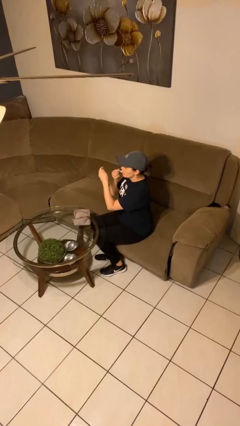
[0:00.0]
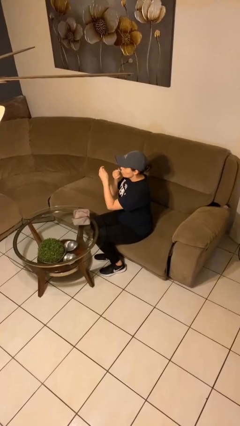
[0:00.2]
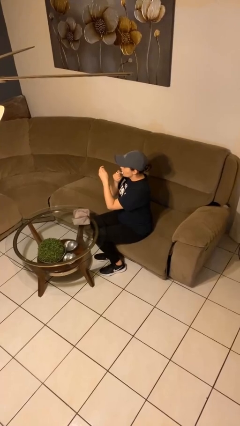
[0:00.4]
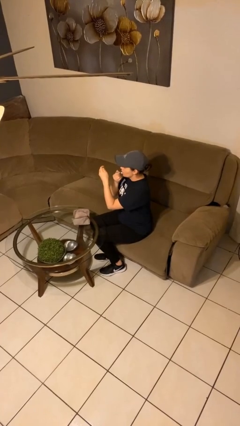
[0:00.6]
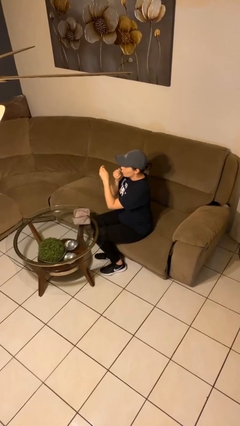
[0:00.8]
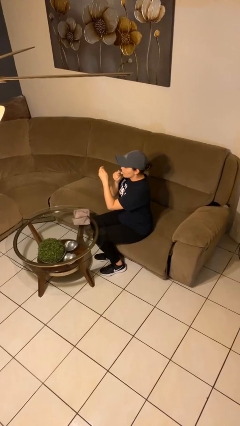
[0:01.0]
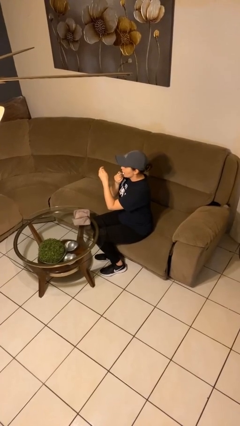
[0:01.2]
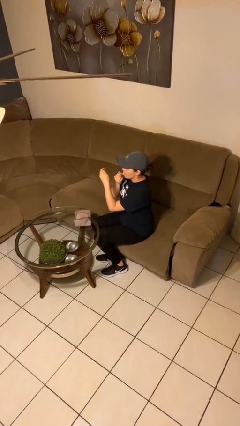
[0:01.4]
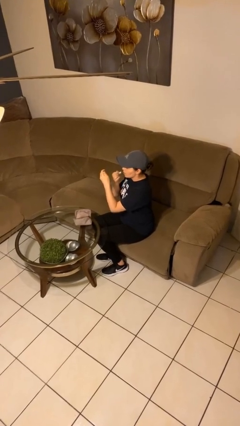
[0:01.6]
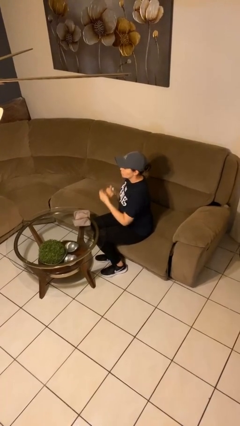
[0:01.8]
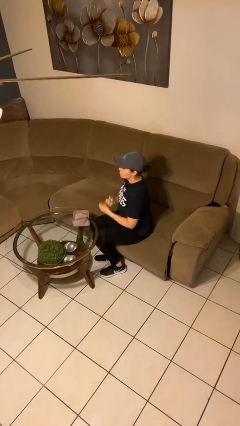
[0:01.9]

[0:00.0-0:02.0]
person applies lip makeup

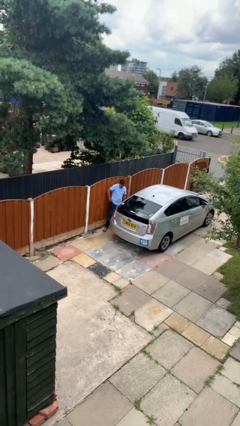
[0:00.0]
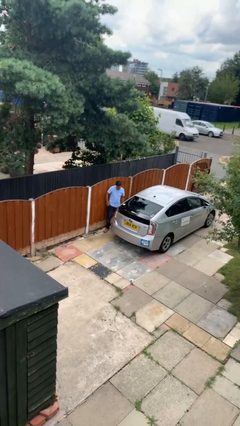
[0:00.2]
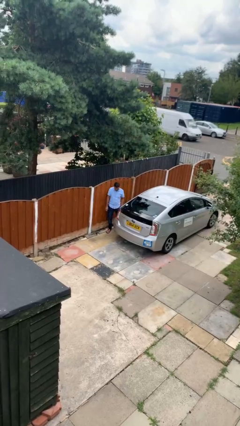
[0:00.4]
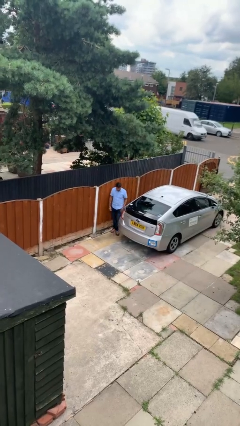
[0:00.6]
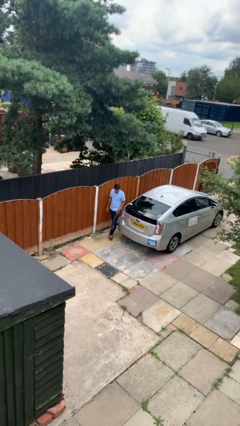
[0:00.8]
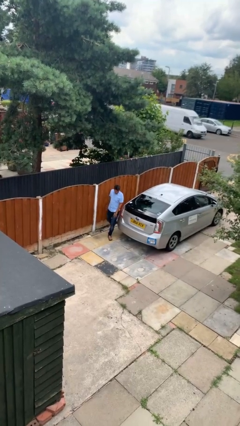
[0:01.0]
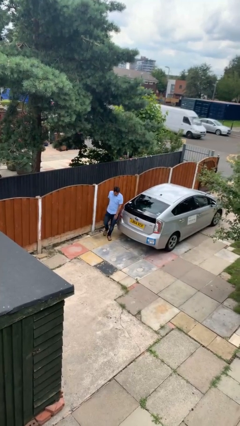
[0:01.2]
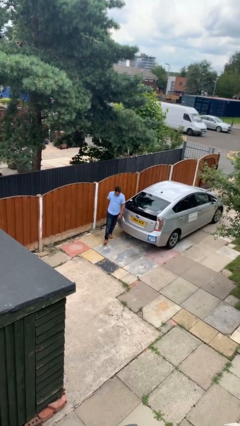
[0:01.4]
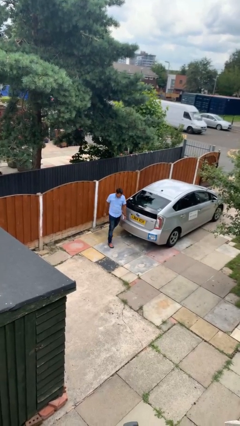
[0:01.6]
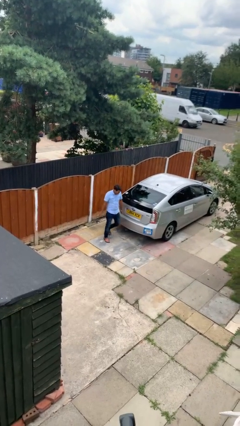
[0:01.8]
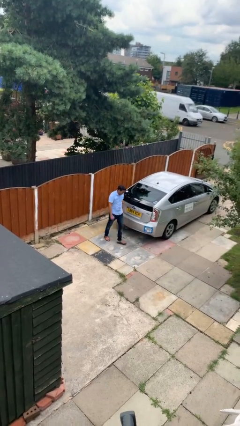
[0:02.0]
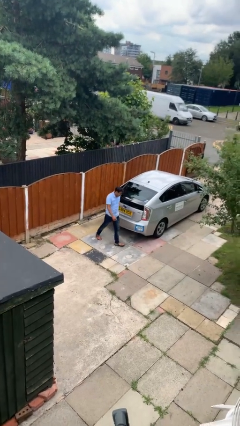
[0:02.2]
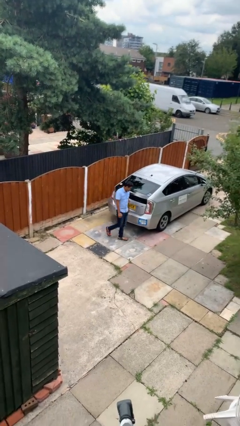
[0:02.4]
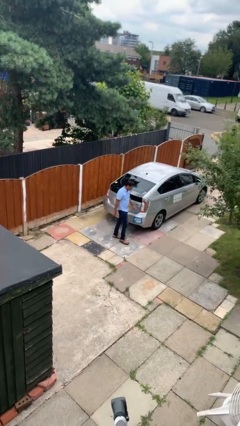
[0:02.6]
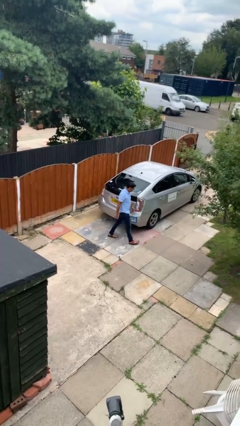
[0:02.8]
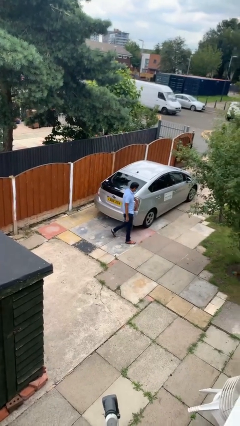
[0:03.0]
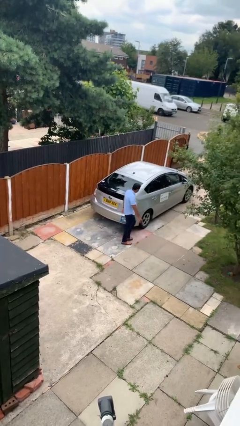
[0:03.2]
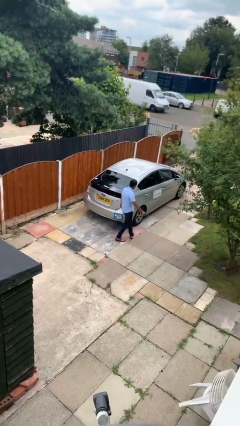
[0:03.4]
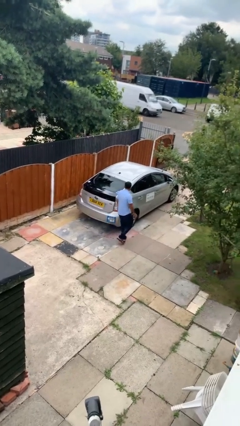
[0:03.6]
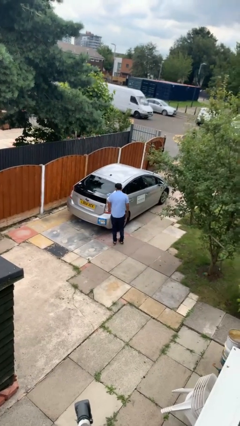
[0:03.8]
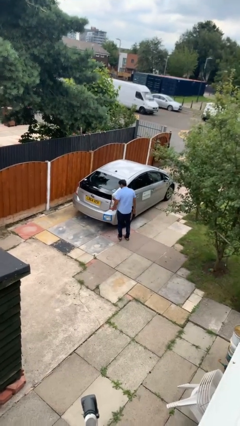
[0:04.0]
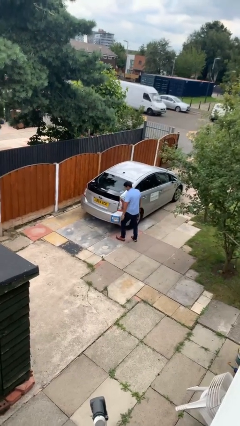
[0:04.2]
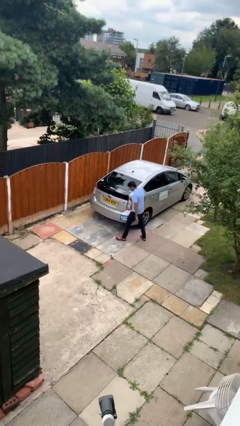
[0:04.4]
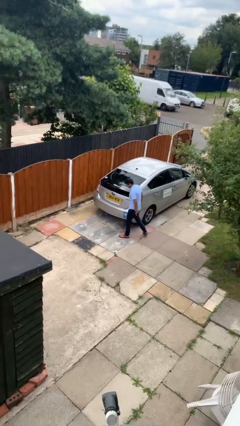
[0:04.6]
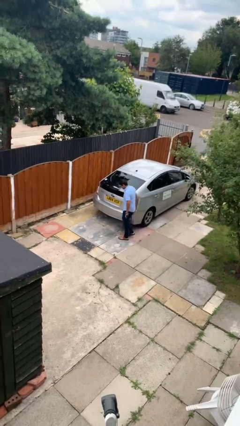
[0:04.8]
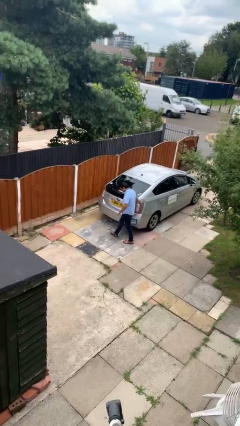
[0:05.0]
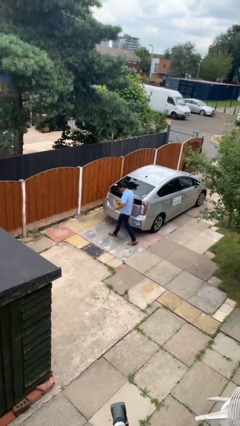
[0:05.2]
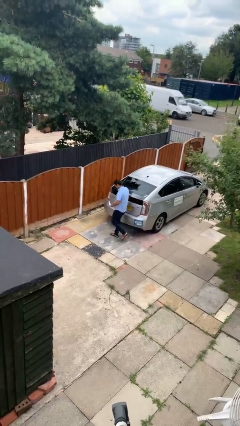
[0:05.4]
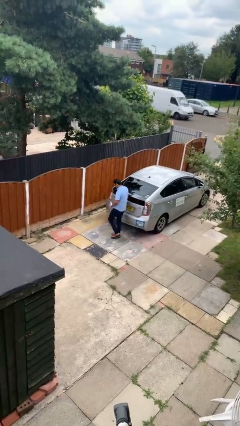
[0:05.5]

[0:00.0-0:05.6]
person walks around car

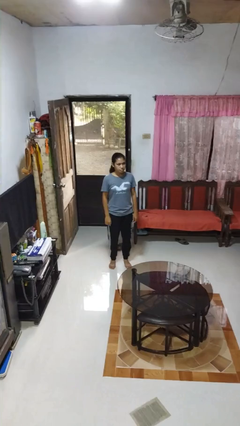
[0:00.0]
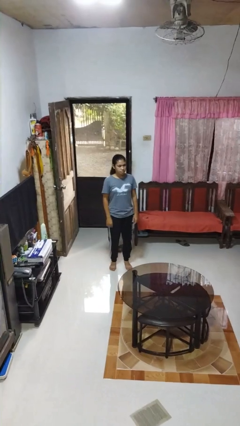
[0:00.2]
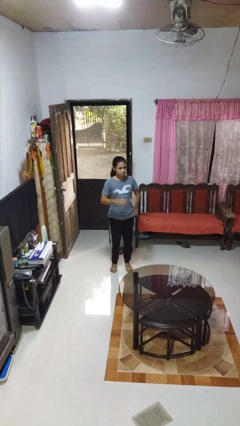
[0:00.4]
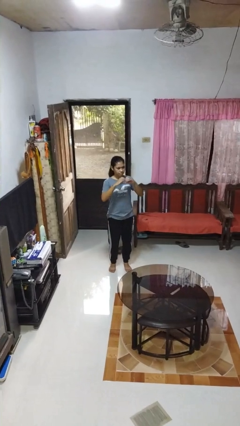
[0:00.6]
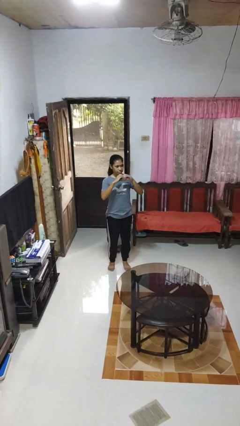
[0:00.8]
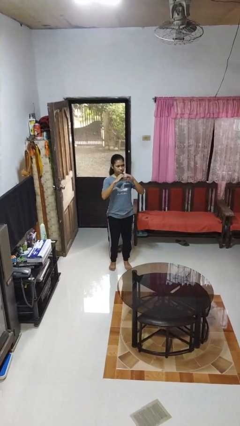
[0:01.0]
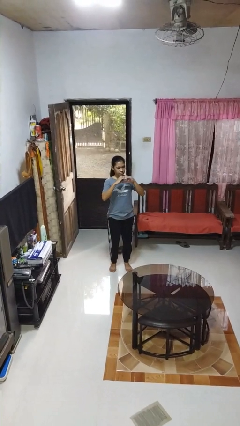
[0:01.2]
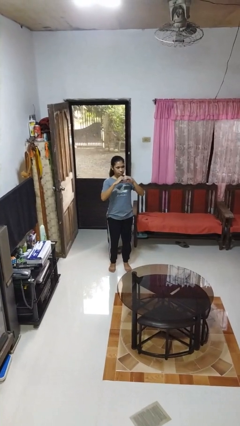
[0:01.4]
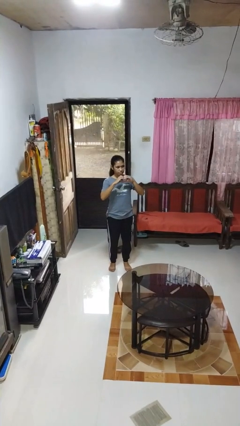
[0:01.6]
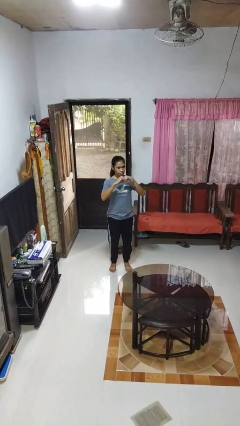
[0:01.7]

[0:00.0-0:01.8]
person gestures heart

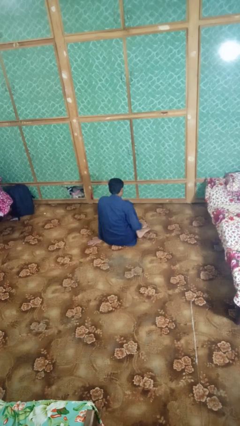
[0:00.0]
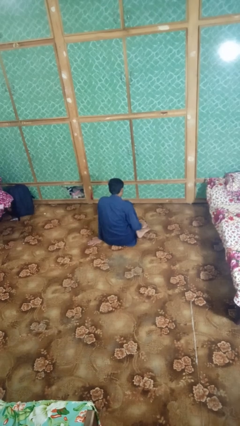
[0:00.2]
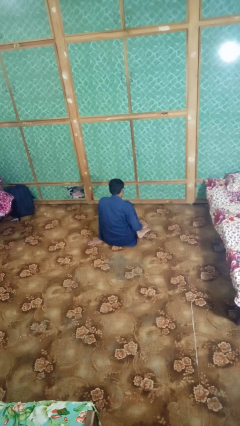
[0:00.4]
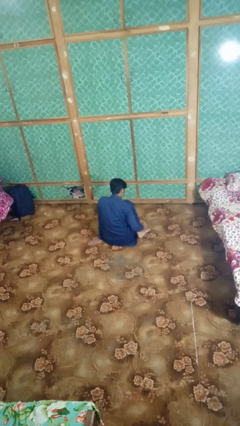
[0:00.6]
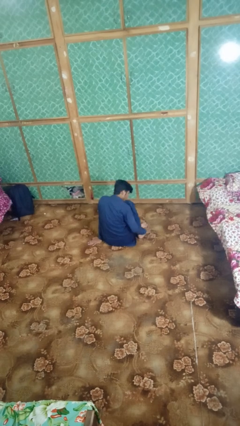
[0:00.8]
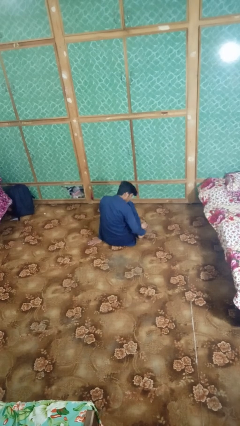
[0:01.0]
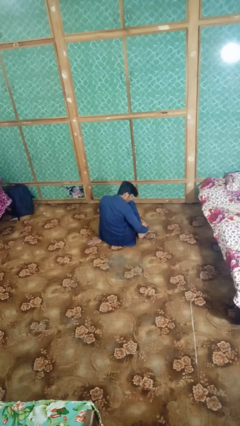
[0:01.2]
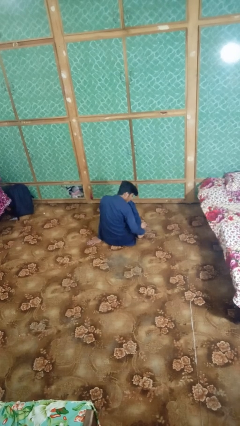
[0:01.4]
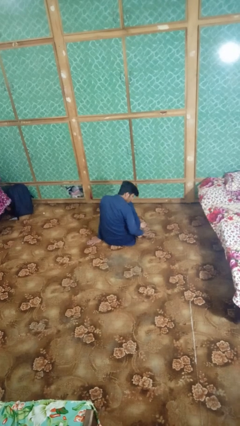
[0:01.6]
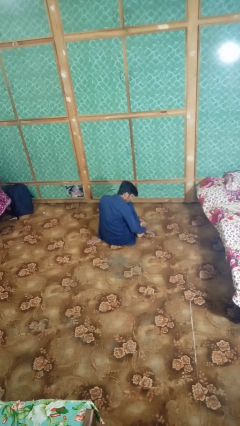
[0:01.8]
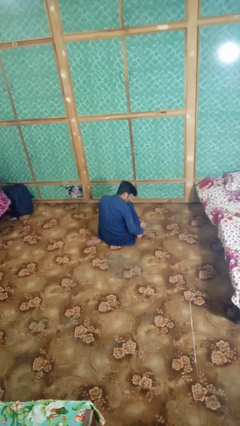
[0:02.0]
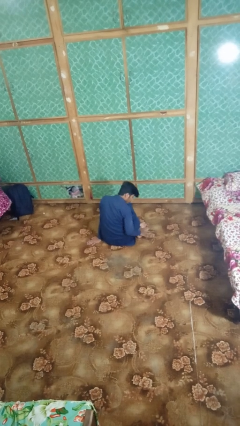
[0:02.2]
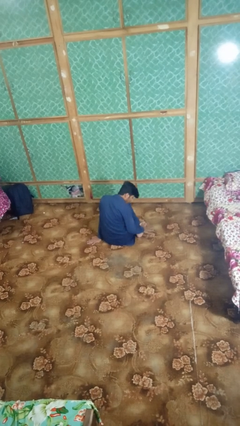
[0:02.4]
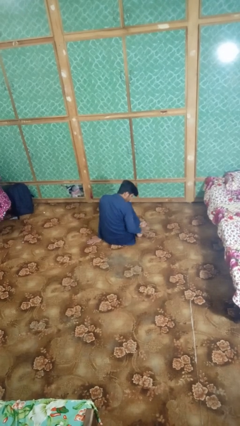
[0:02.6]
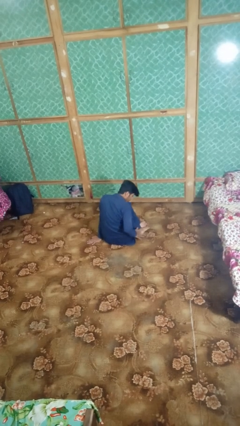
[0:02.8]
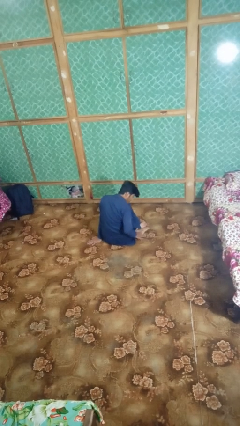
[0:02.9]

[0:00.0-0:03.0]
person rubs foot

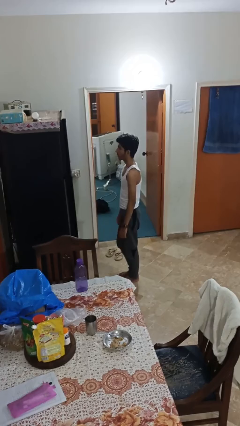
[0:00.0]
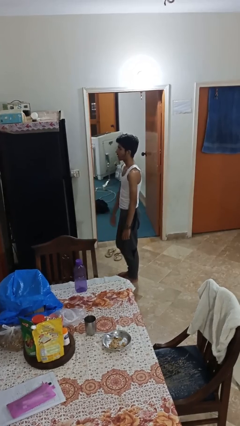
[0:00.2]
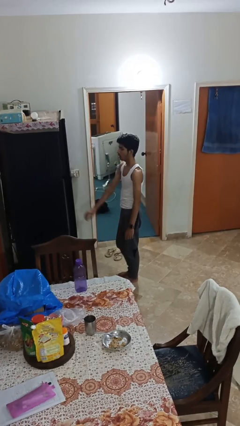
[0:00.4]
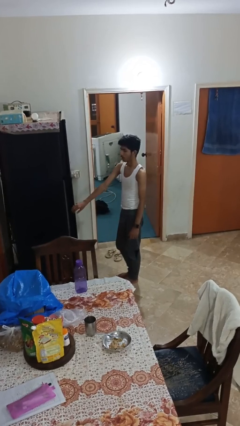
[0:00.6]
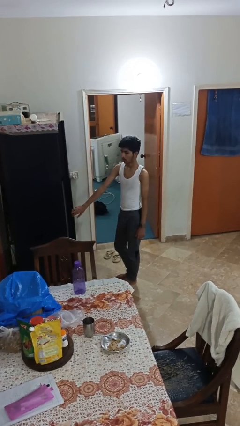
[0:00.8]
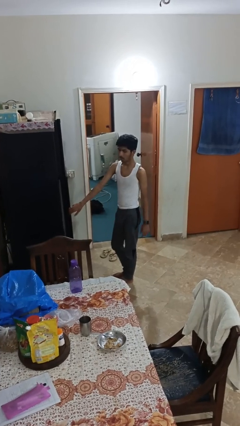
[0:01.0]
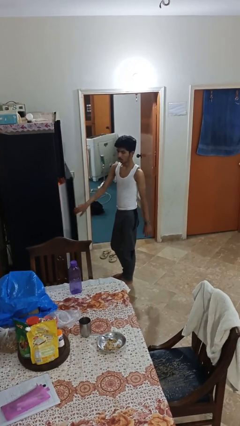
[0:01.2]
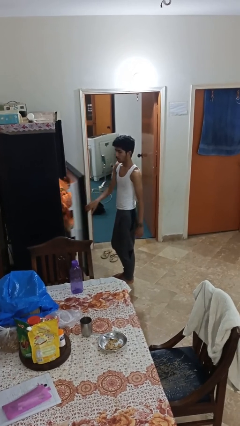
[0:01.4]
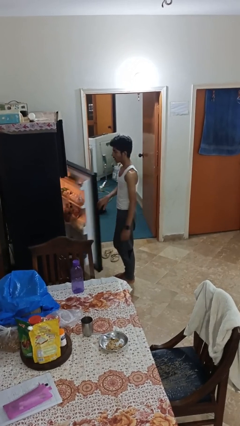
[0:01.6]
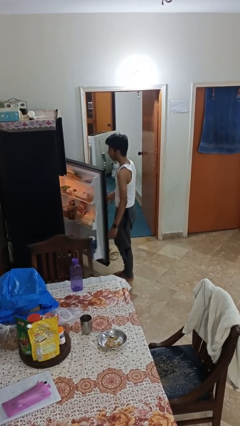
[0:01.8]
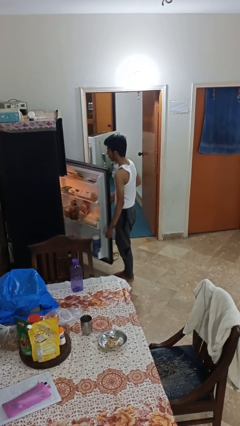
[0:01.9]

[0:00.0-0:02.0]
person opens refrigerator

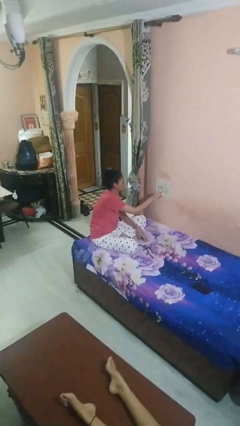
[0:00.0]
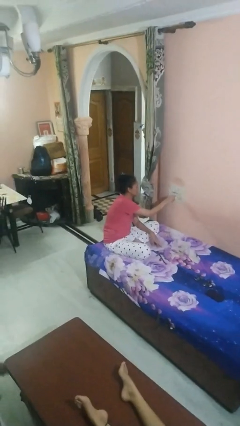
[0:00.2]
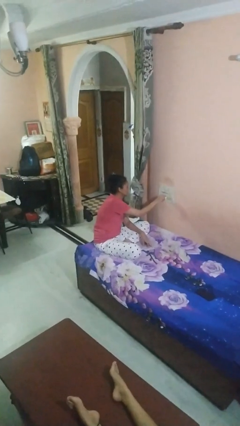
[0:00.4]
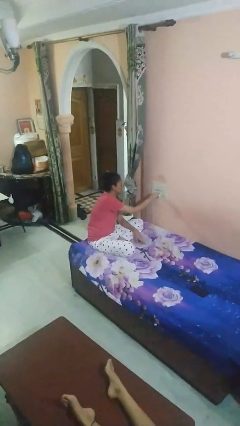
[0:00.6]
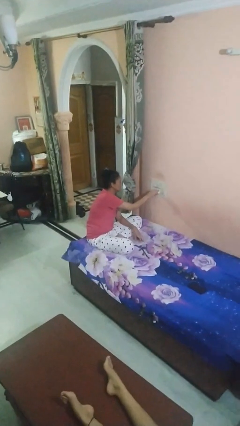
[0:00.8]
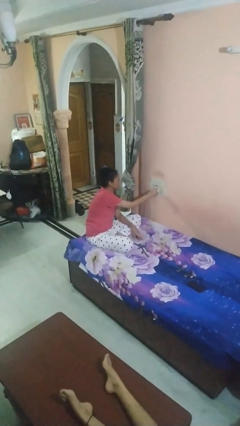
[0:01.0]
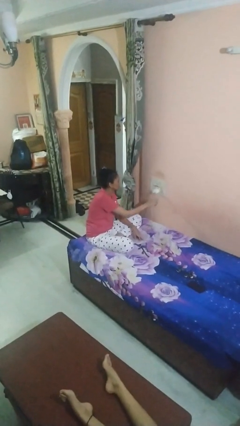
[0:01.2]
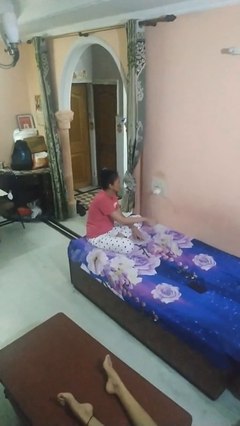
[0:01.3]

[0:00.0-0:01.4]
person plugs into electrical socket

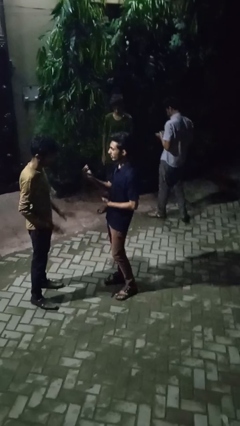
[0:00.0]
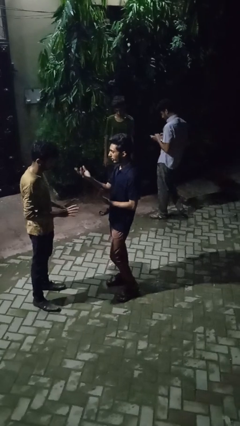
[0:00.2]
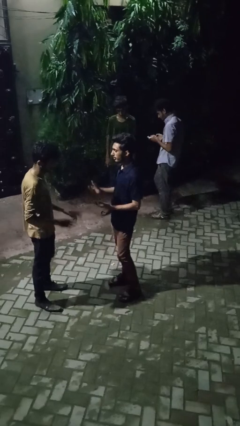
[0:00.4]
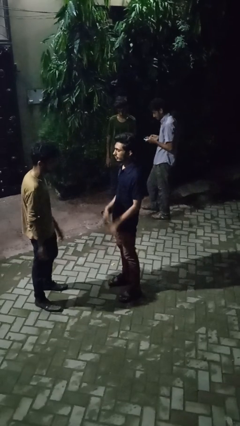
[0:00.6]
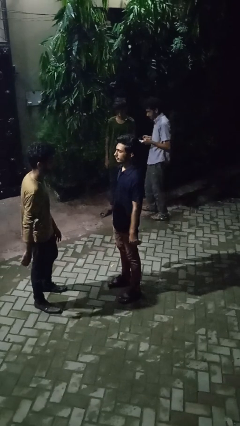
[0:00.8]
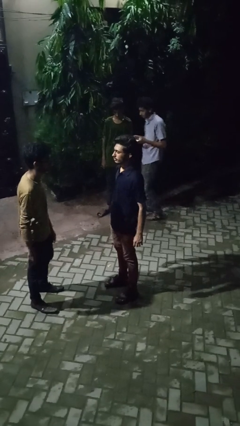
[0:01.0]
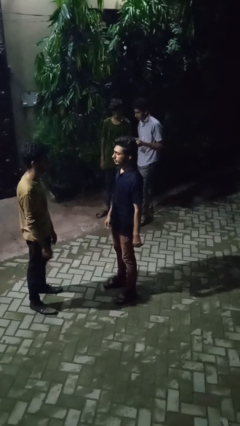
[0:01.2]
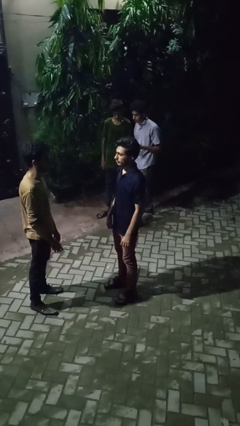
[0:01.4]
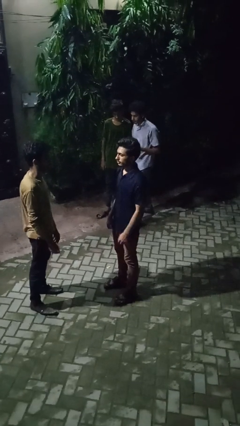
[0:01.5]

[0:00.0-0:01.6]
person talks to person
